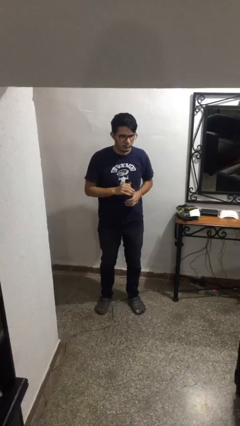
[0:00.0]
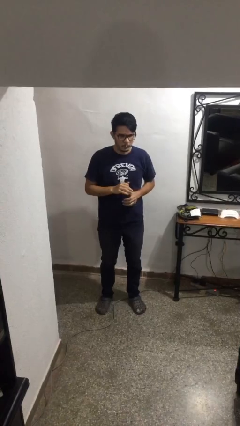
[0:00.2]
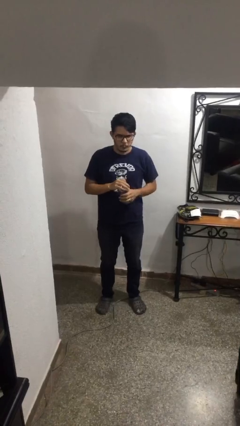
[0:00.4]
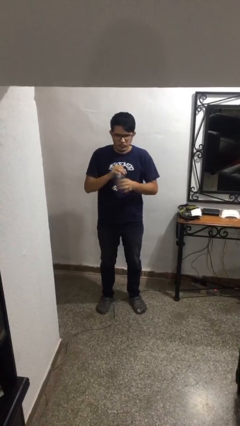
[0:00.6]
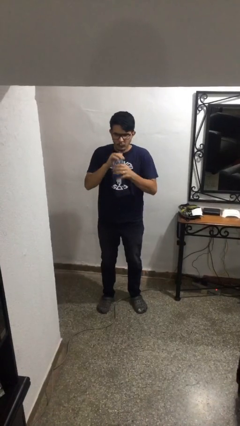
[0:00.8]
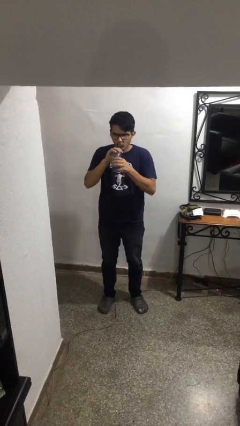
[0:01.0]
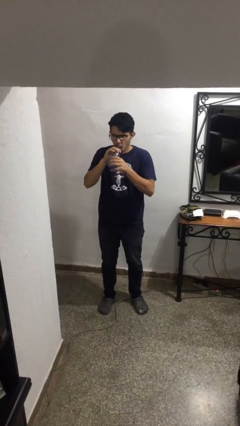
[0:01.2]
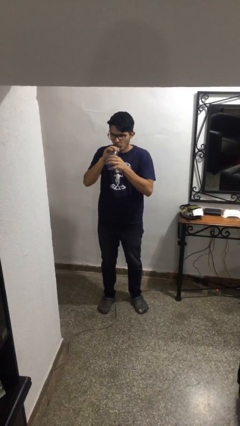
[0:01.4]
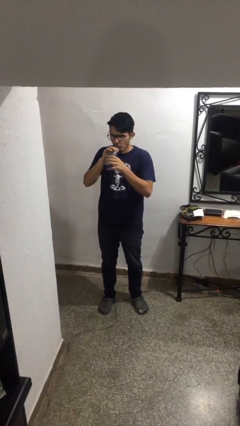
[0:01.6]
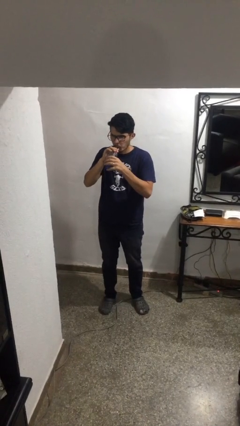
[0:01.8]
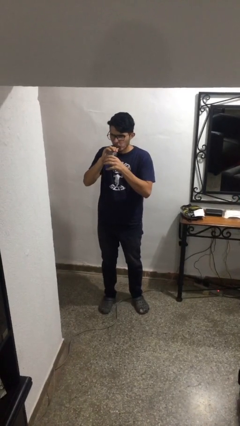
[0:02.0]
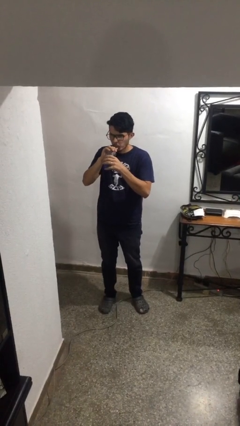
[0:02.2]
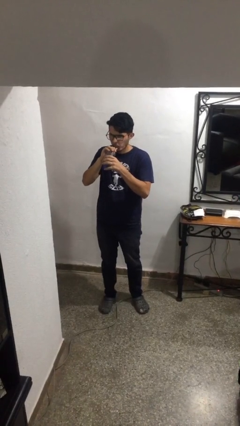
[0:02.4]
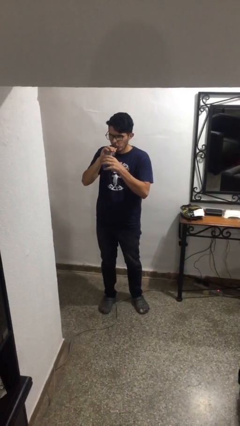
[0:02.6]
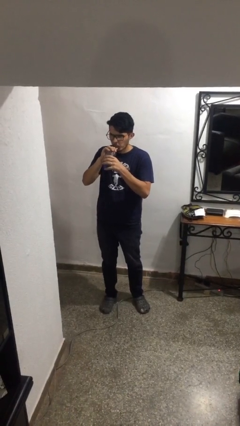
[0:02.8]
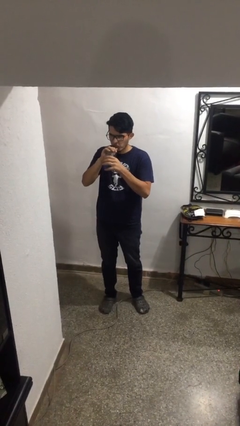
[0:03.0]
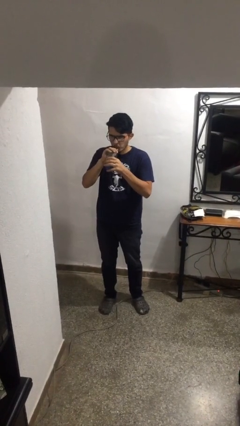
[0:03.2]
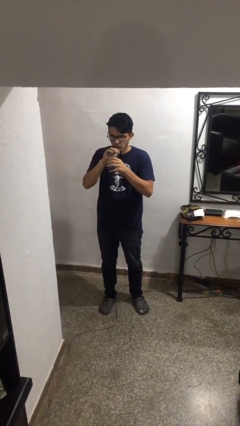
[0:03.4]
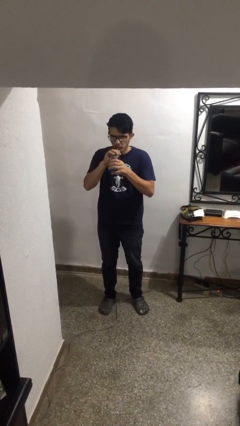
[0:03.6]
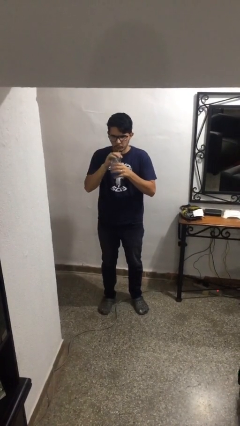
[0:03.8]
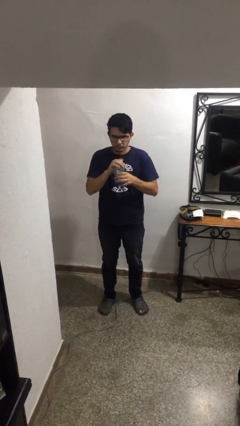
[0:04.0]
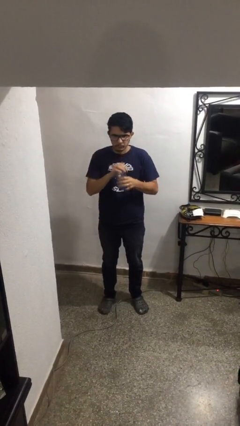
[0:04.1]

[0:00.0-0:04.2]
person drinks from straw

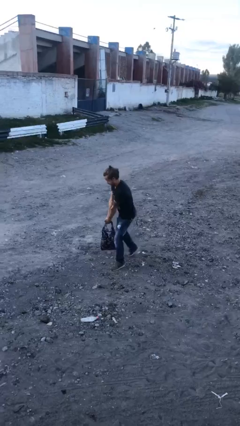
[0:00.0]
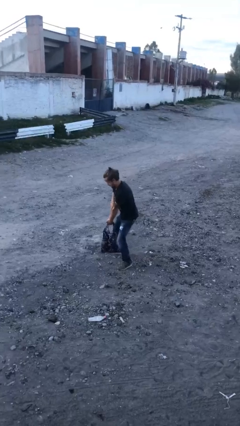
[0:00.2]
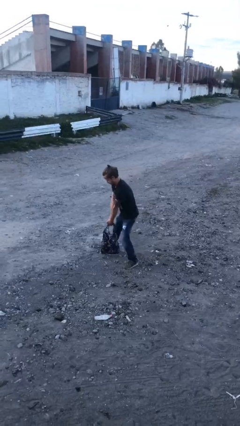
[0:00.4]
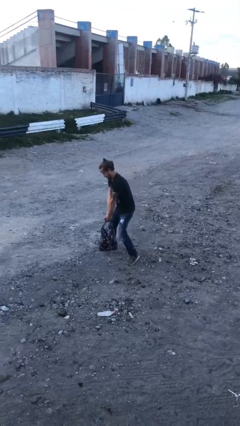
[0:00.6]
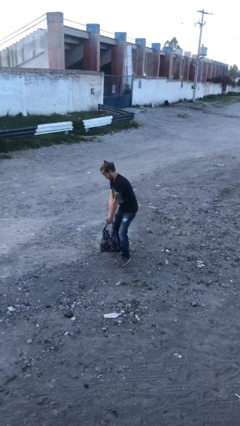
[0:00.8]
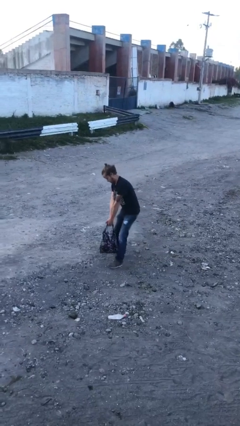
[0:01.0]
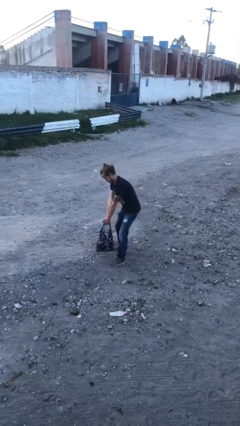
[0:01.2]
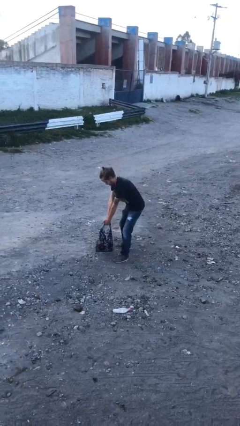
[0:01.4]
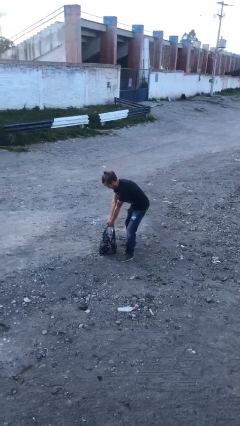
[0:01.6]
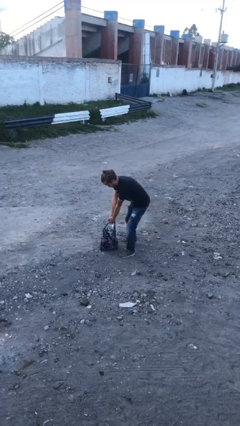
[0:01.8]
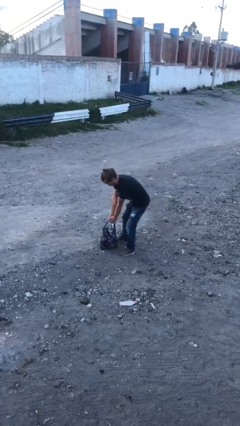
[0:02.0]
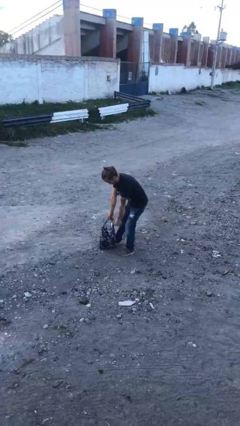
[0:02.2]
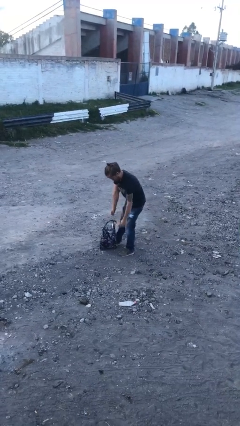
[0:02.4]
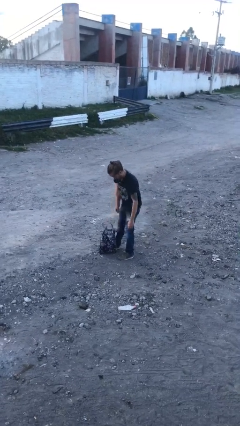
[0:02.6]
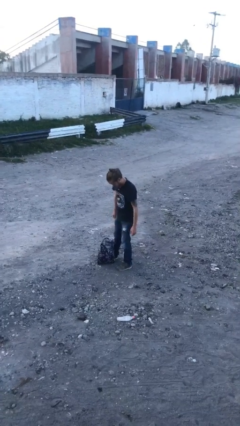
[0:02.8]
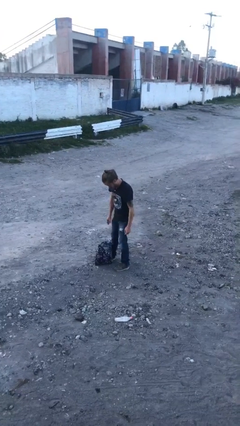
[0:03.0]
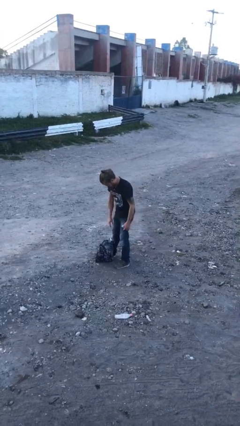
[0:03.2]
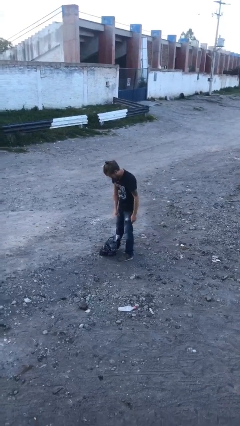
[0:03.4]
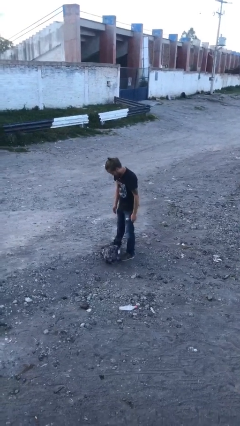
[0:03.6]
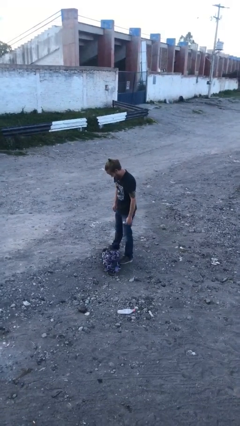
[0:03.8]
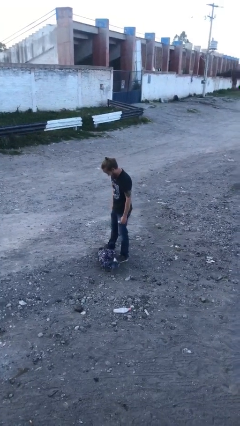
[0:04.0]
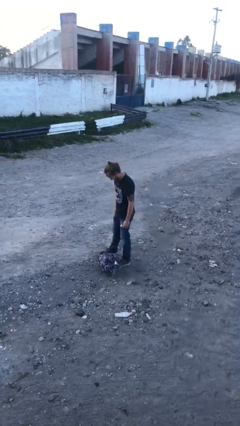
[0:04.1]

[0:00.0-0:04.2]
person puts down object on floor

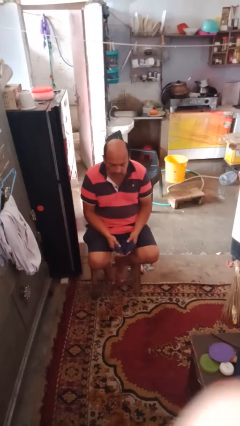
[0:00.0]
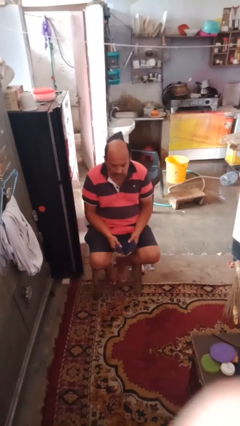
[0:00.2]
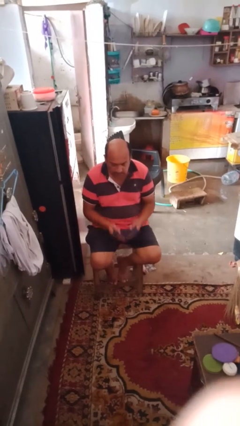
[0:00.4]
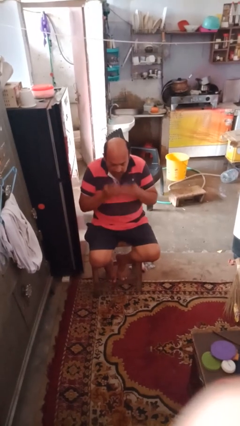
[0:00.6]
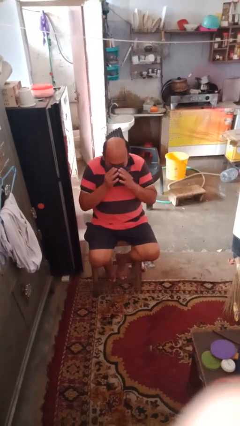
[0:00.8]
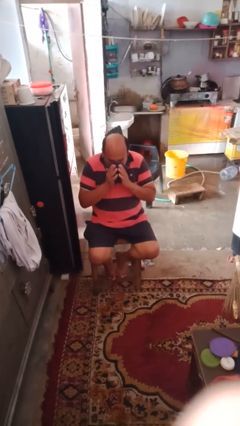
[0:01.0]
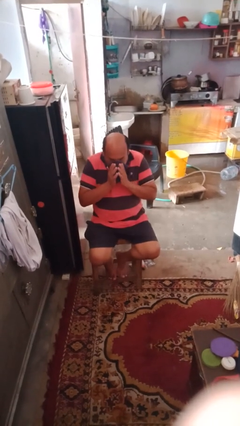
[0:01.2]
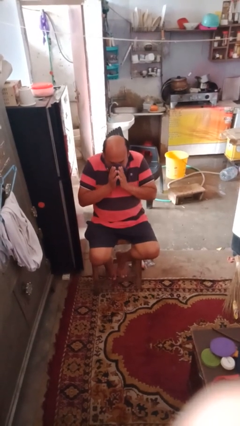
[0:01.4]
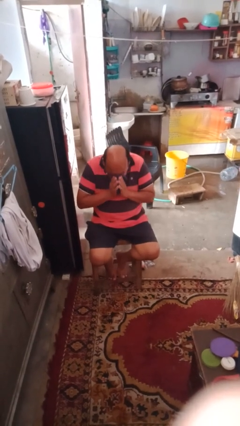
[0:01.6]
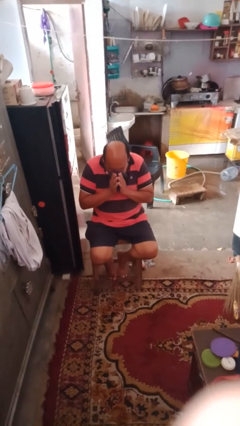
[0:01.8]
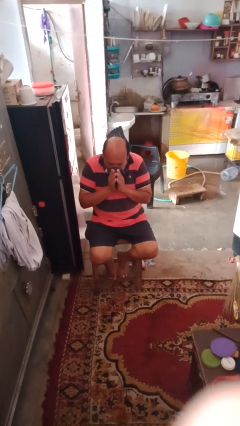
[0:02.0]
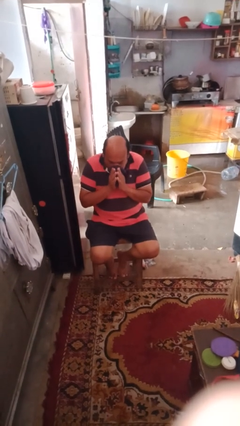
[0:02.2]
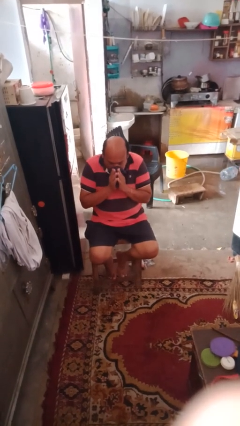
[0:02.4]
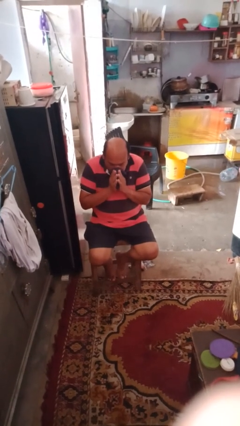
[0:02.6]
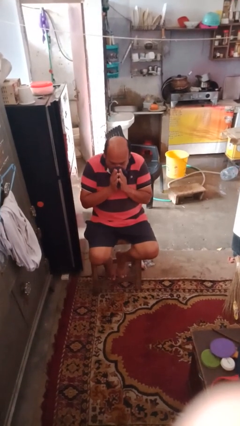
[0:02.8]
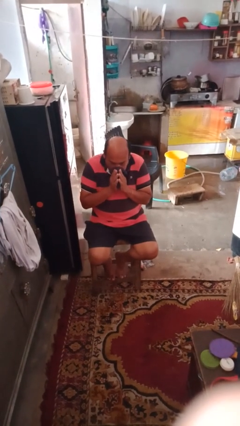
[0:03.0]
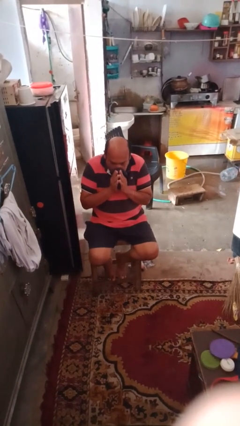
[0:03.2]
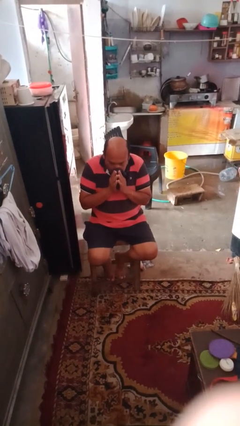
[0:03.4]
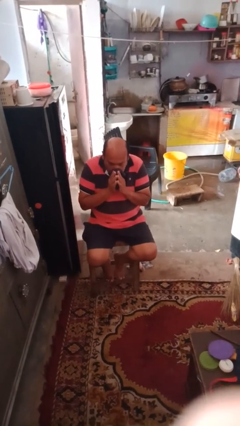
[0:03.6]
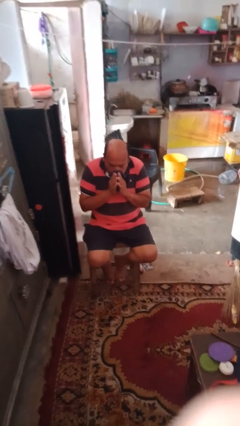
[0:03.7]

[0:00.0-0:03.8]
person blows nose

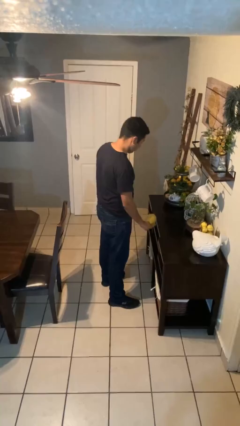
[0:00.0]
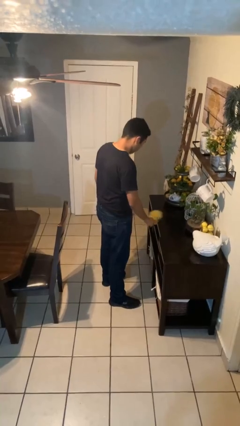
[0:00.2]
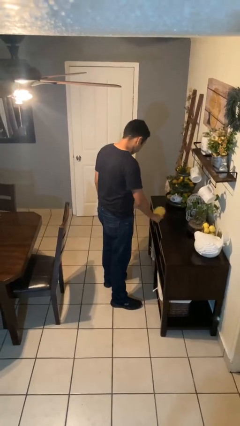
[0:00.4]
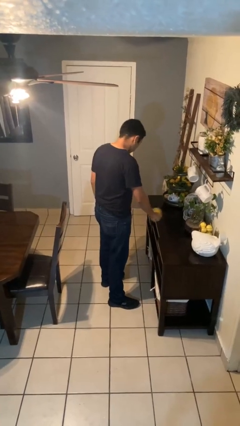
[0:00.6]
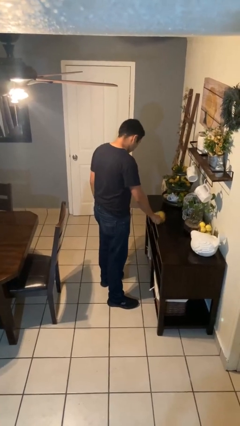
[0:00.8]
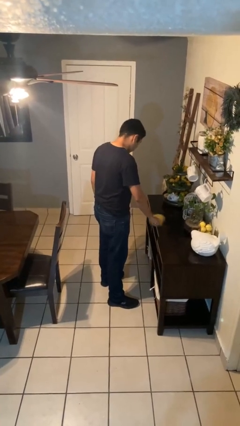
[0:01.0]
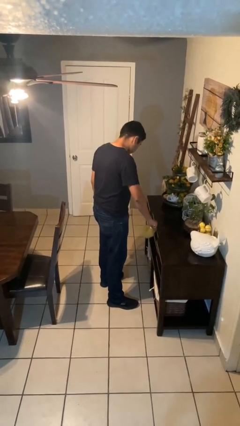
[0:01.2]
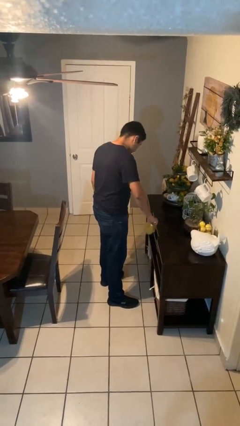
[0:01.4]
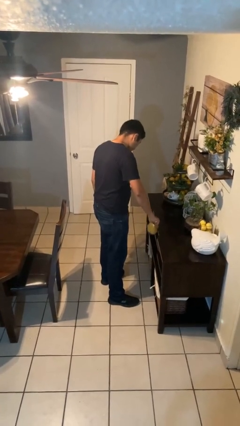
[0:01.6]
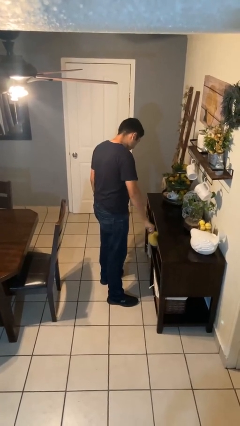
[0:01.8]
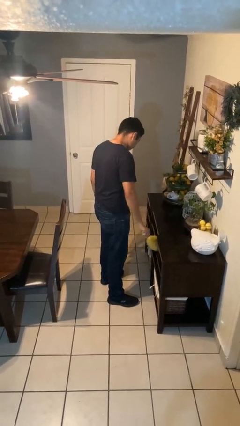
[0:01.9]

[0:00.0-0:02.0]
person dusts furniture

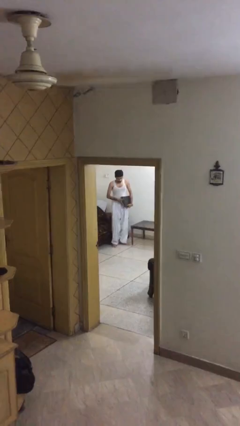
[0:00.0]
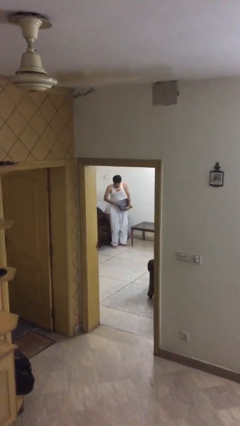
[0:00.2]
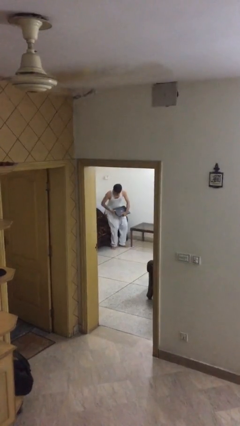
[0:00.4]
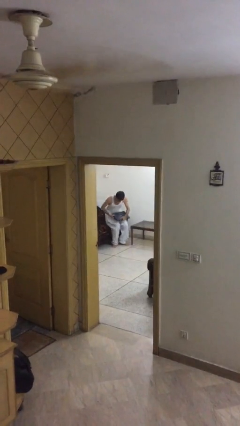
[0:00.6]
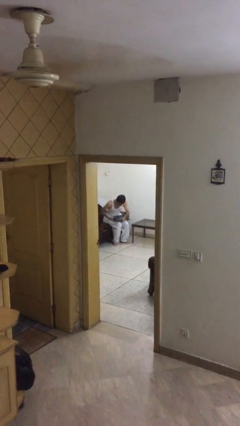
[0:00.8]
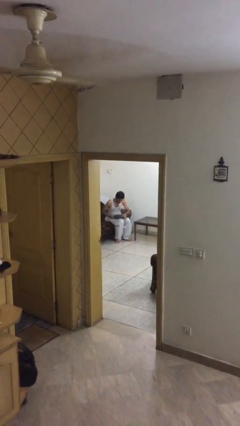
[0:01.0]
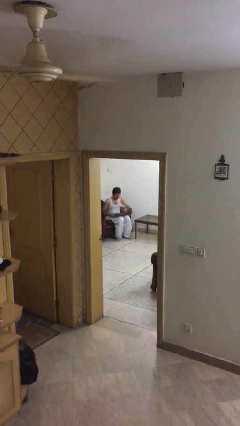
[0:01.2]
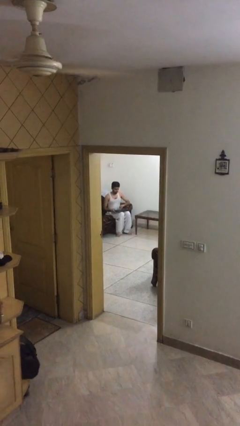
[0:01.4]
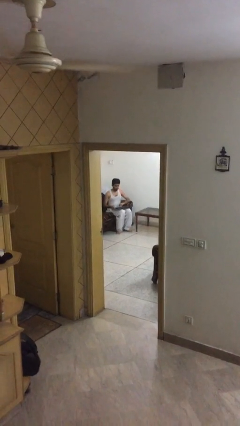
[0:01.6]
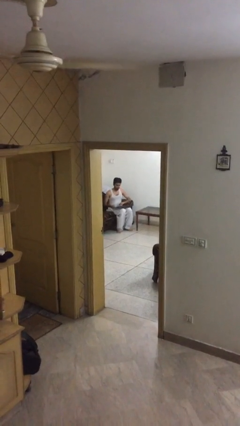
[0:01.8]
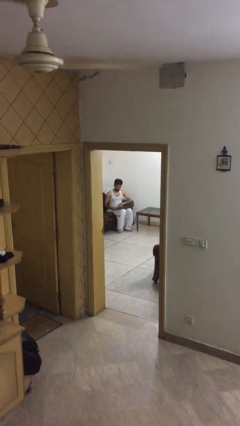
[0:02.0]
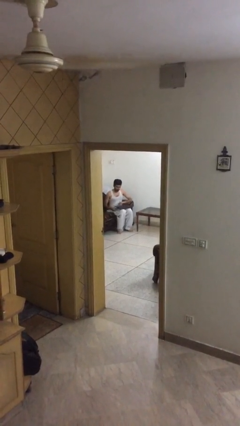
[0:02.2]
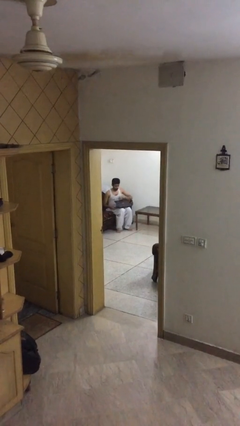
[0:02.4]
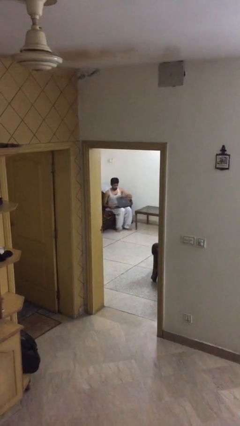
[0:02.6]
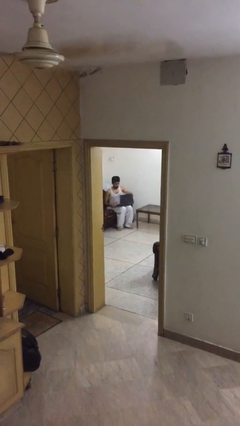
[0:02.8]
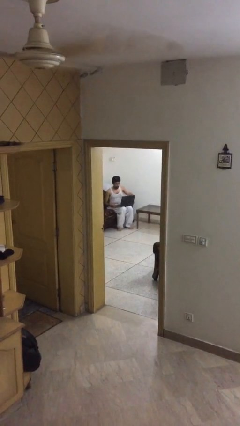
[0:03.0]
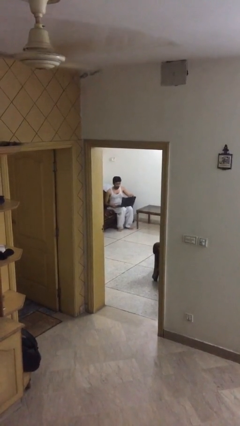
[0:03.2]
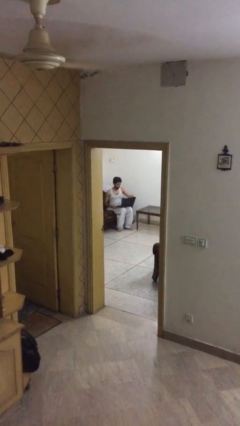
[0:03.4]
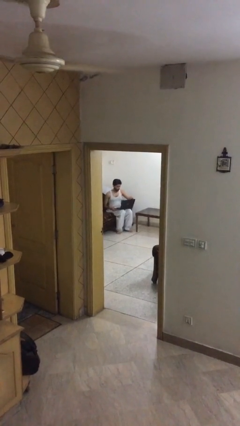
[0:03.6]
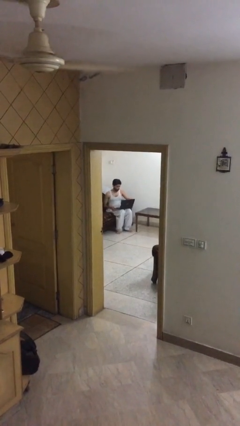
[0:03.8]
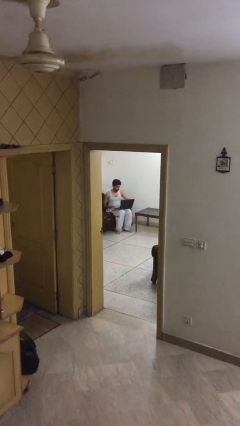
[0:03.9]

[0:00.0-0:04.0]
person sits down
